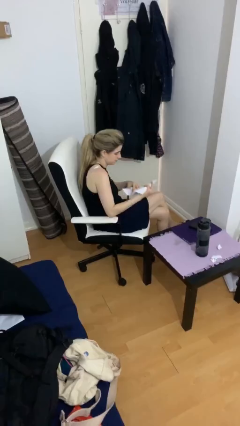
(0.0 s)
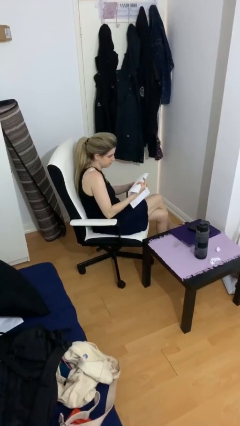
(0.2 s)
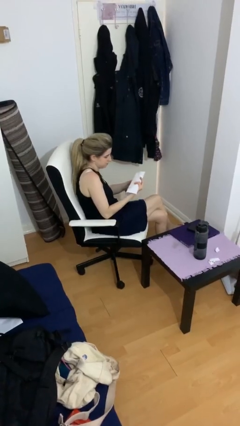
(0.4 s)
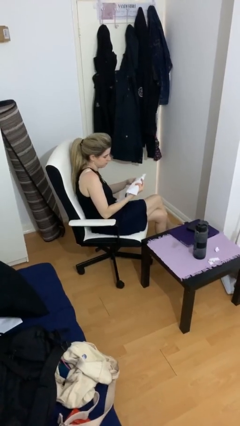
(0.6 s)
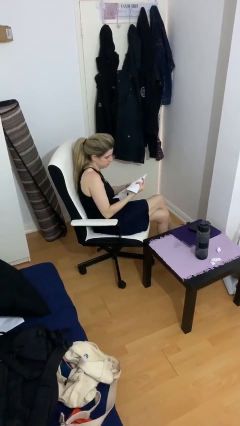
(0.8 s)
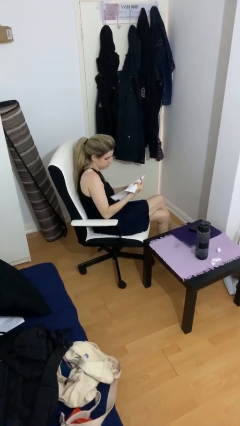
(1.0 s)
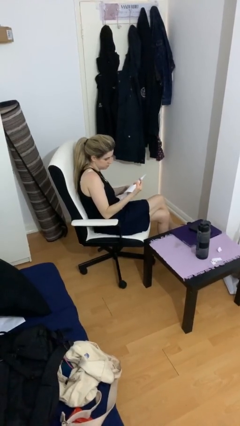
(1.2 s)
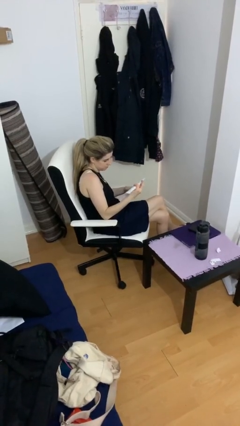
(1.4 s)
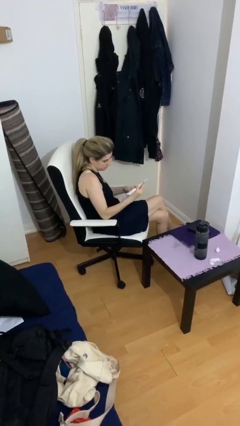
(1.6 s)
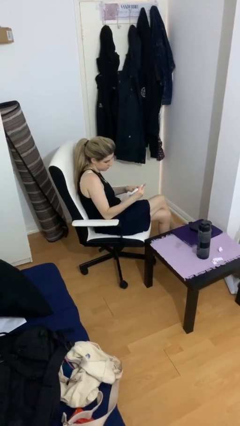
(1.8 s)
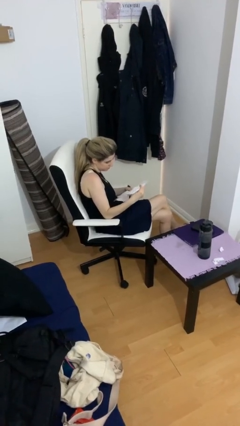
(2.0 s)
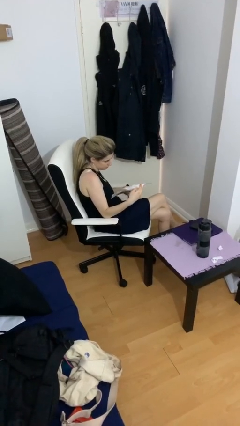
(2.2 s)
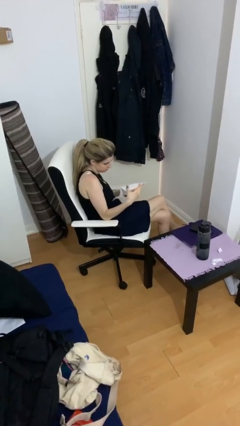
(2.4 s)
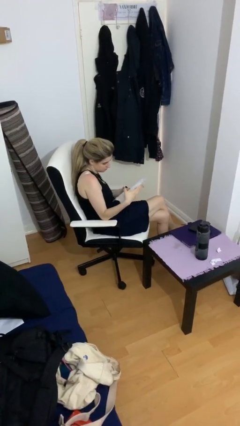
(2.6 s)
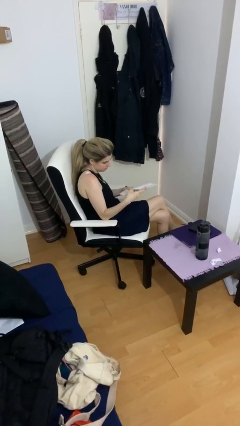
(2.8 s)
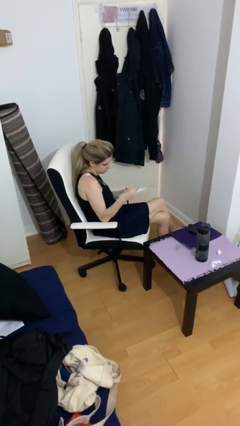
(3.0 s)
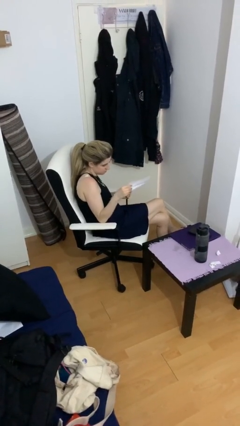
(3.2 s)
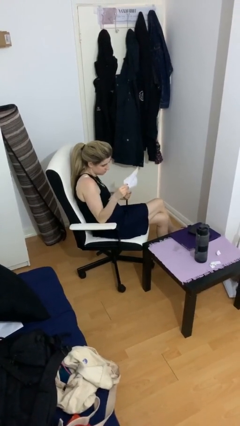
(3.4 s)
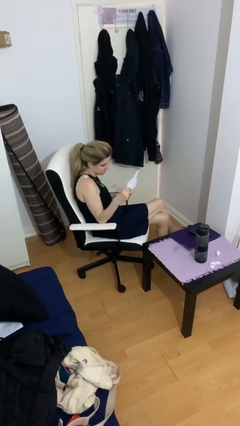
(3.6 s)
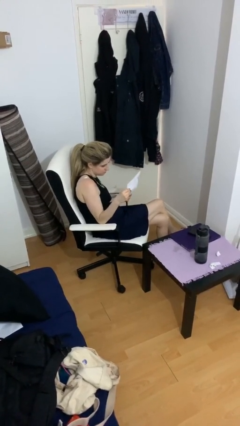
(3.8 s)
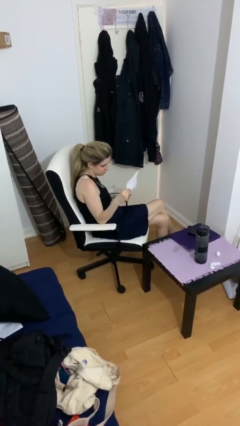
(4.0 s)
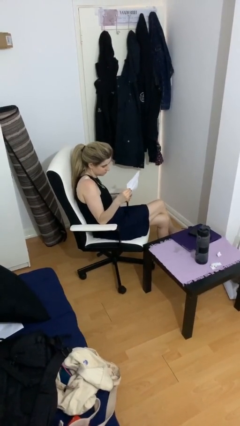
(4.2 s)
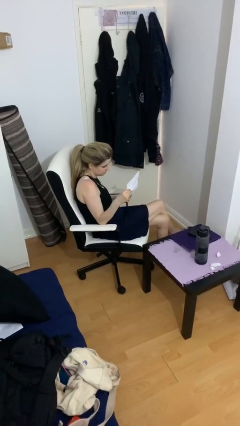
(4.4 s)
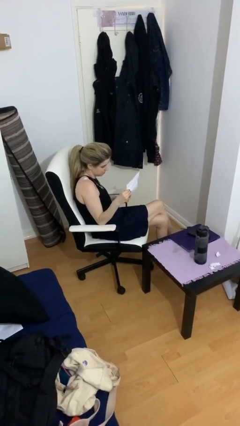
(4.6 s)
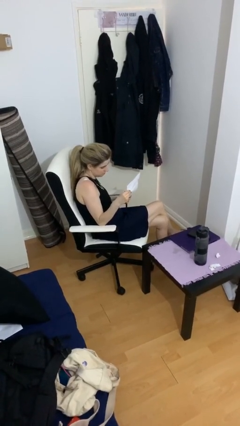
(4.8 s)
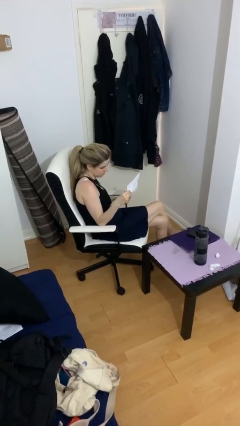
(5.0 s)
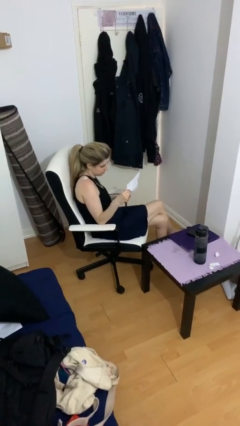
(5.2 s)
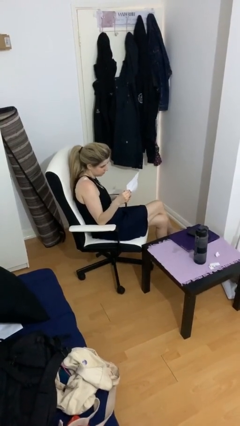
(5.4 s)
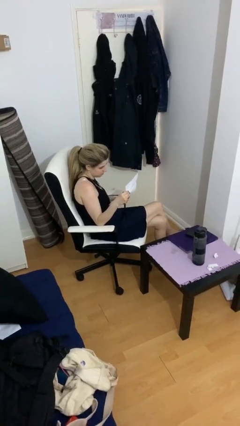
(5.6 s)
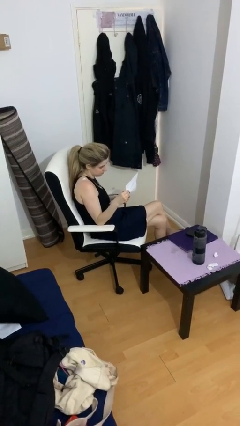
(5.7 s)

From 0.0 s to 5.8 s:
person reads document

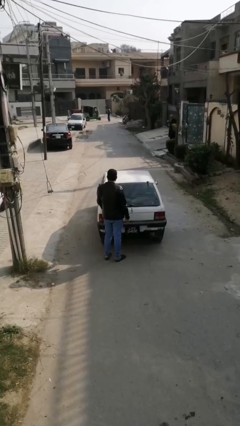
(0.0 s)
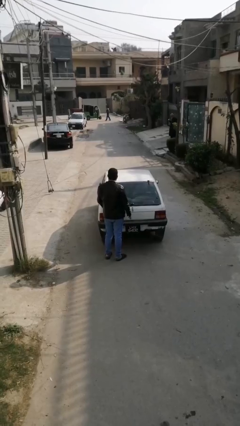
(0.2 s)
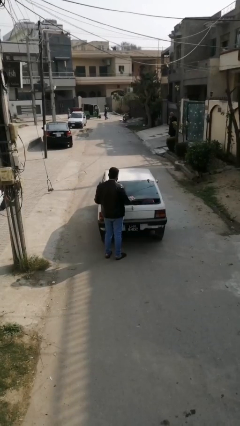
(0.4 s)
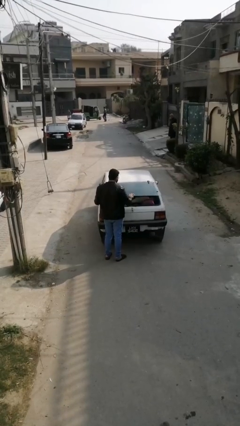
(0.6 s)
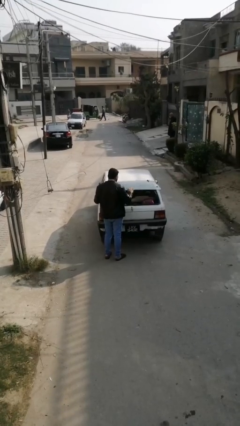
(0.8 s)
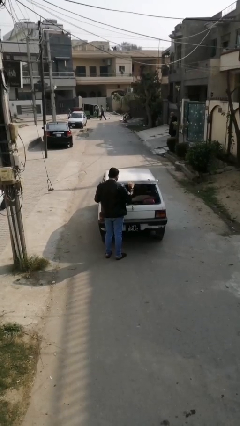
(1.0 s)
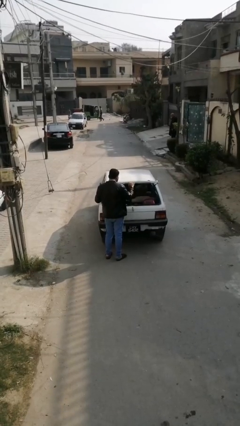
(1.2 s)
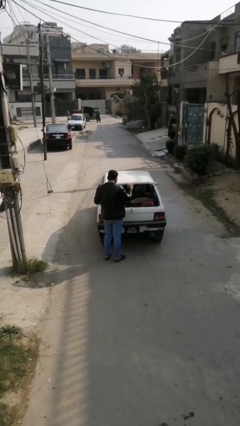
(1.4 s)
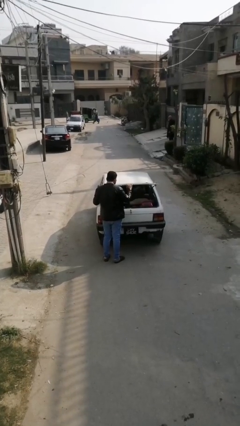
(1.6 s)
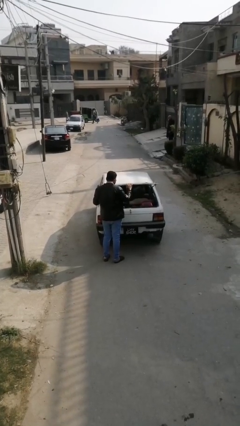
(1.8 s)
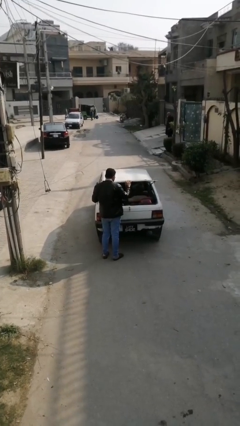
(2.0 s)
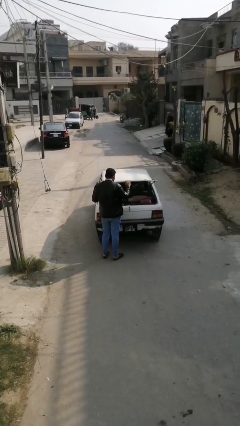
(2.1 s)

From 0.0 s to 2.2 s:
person opens car trunk

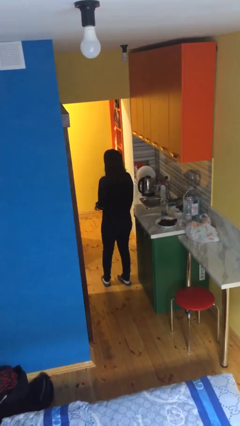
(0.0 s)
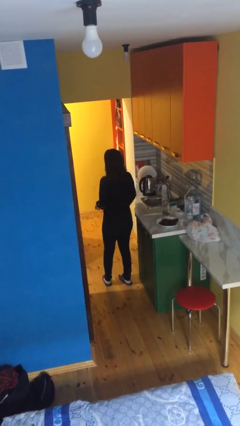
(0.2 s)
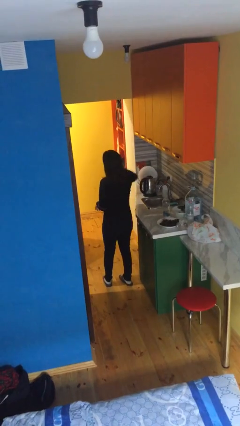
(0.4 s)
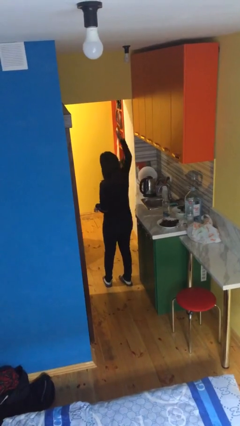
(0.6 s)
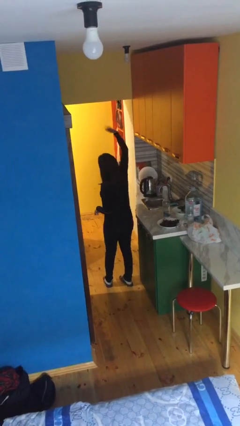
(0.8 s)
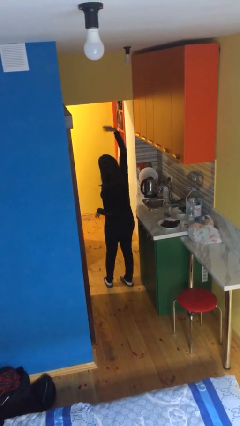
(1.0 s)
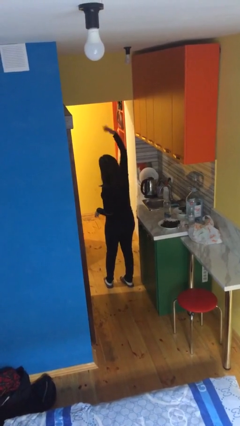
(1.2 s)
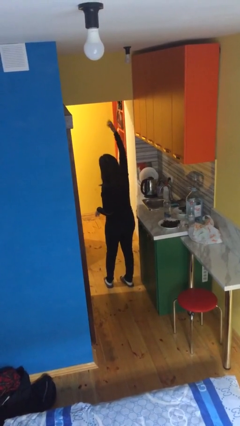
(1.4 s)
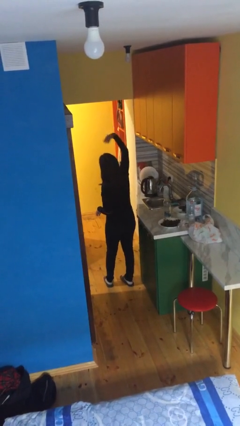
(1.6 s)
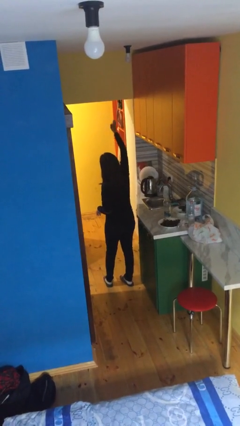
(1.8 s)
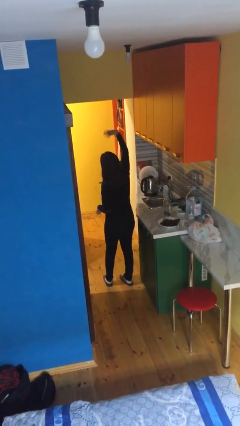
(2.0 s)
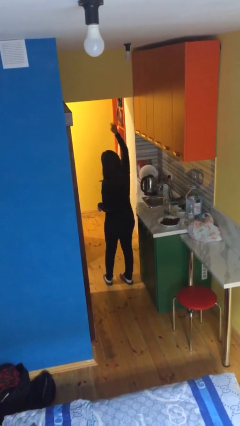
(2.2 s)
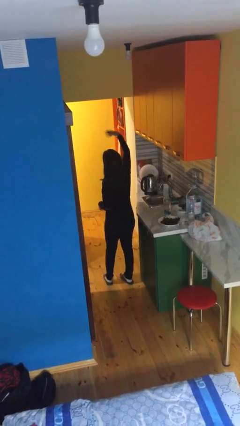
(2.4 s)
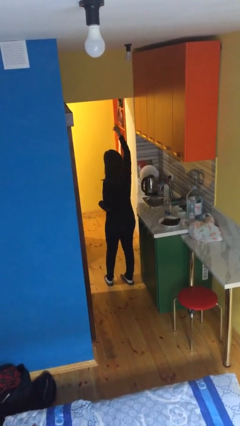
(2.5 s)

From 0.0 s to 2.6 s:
person gestures come here

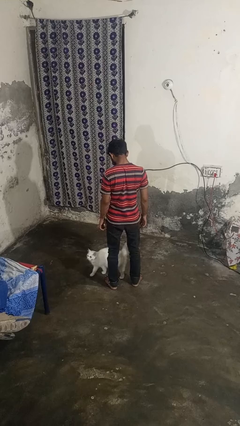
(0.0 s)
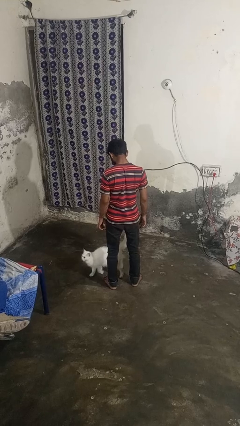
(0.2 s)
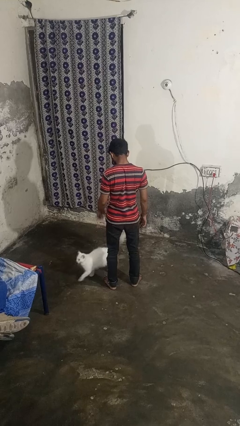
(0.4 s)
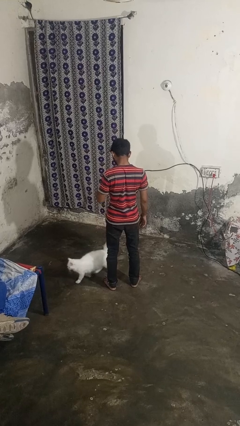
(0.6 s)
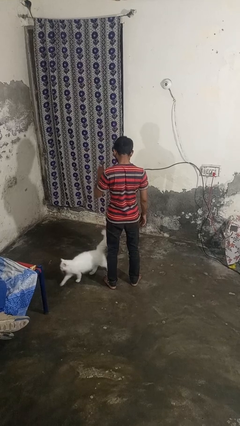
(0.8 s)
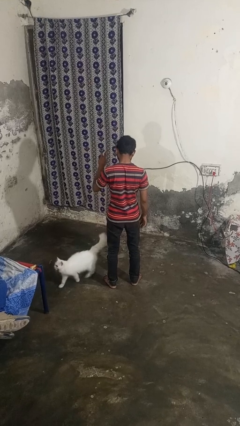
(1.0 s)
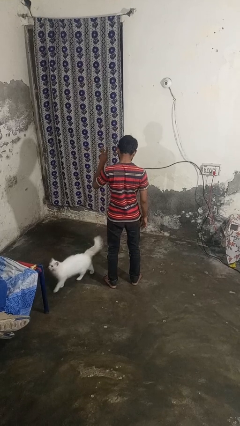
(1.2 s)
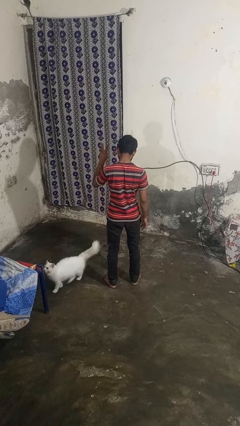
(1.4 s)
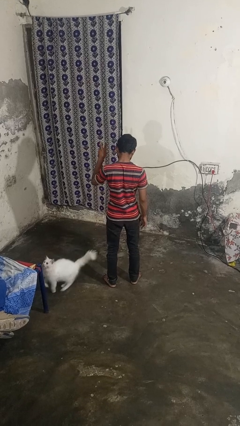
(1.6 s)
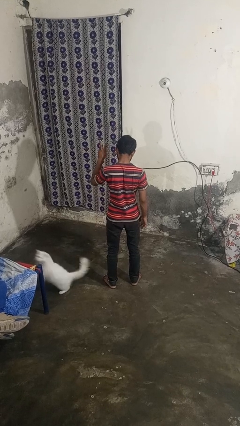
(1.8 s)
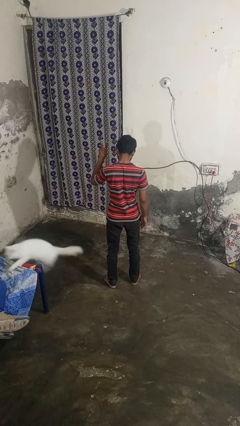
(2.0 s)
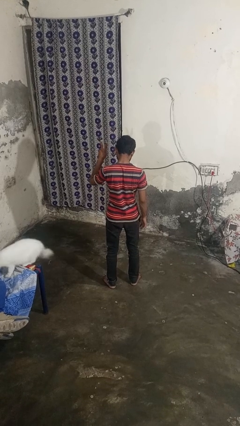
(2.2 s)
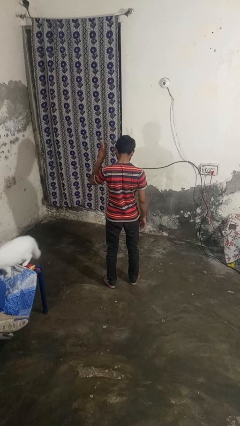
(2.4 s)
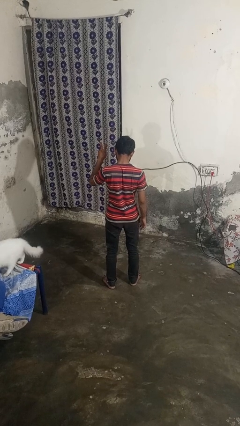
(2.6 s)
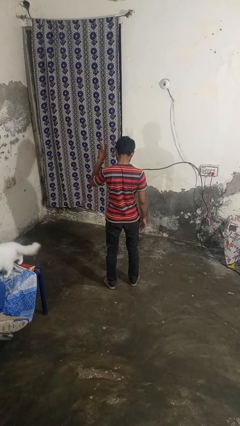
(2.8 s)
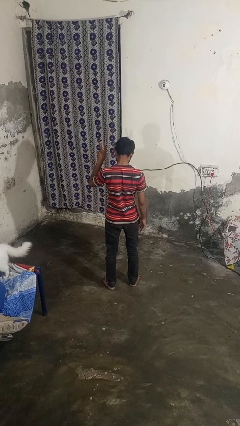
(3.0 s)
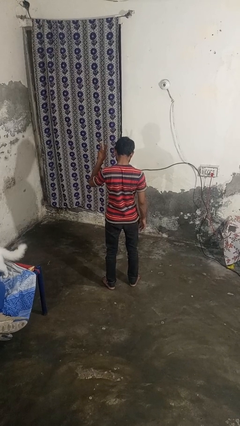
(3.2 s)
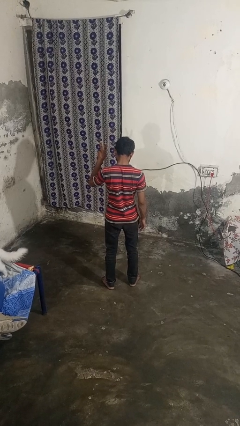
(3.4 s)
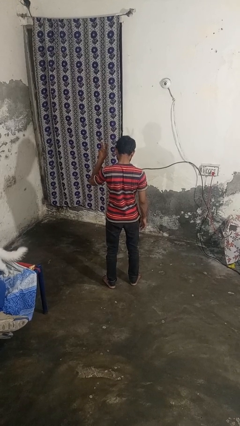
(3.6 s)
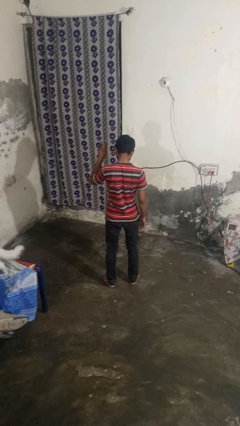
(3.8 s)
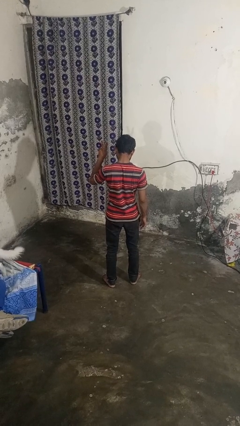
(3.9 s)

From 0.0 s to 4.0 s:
person gestures peace

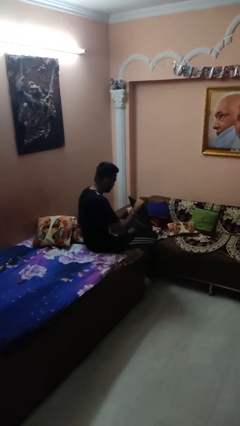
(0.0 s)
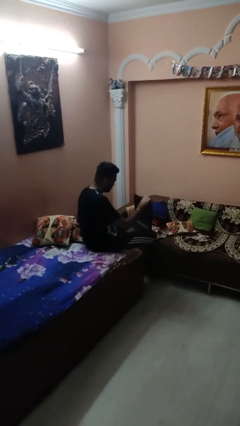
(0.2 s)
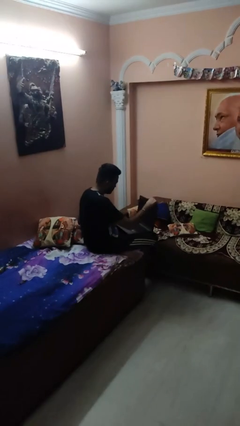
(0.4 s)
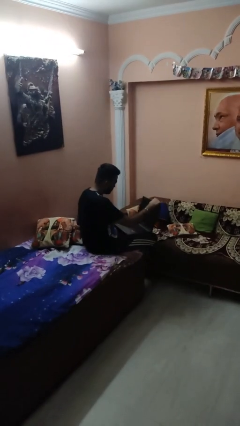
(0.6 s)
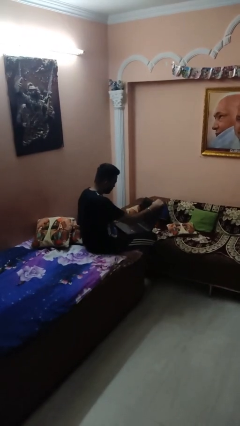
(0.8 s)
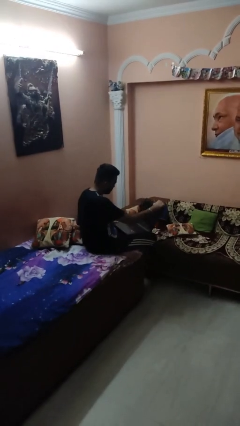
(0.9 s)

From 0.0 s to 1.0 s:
person opens laptop

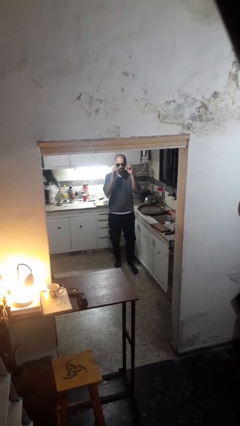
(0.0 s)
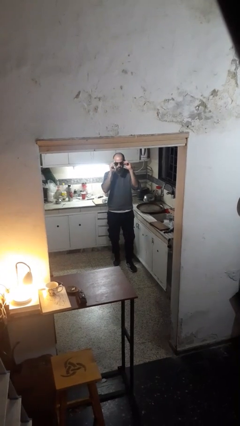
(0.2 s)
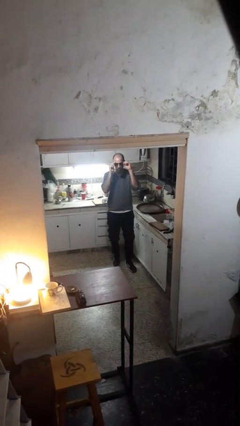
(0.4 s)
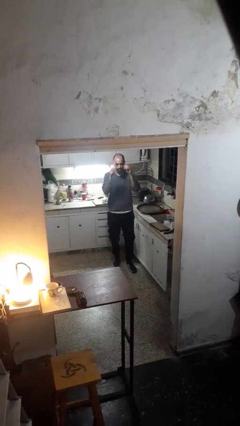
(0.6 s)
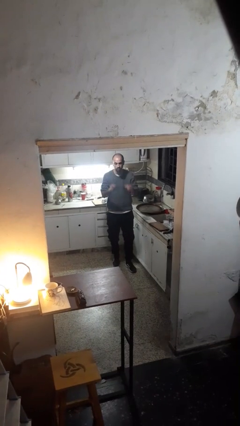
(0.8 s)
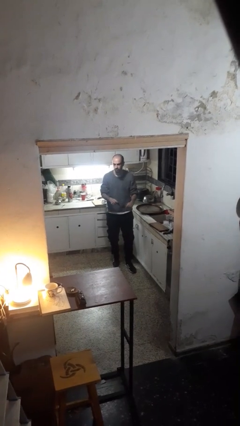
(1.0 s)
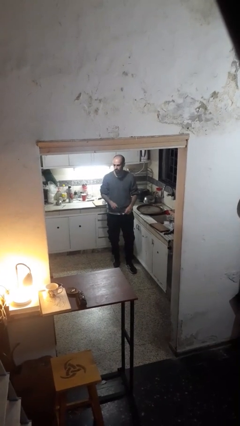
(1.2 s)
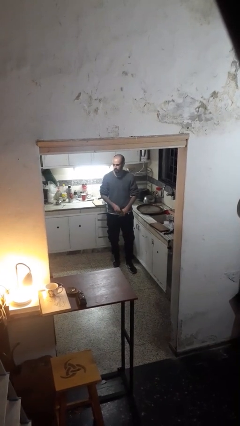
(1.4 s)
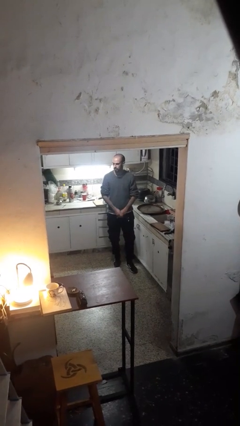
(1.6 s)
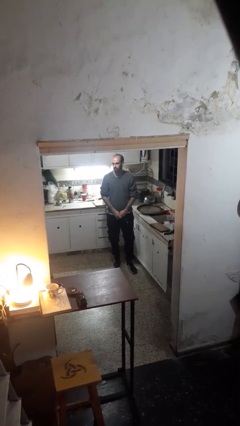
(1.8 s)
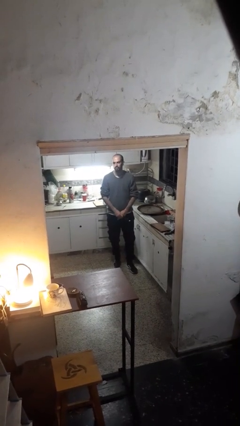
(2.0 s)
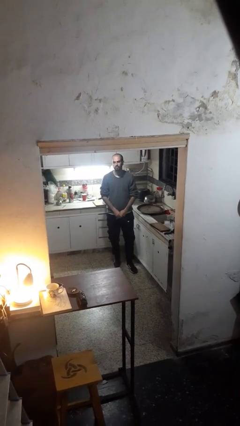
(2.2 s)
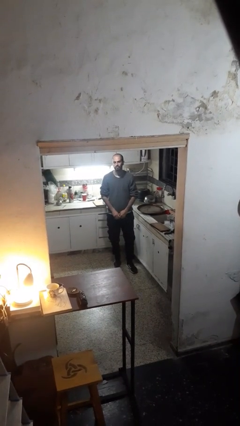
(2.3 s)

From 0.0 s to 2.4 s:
person takes off sunglasses
